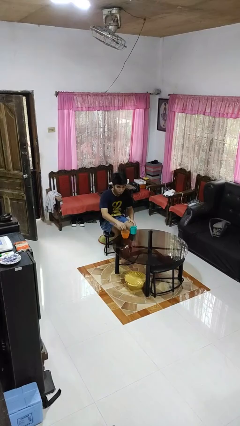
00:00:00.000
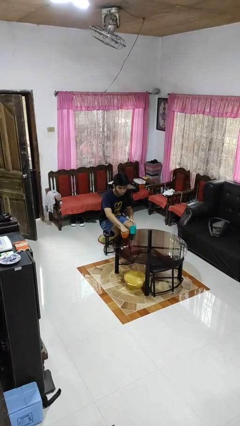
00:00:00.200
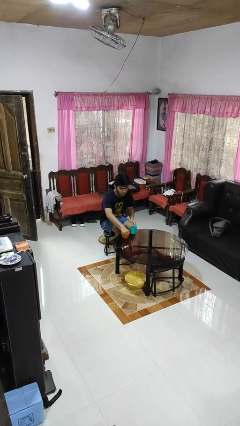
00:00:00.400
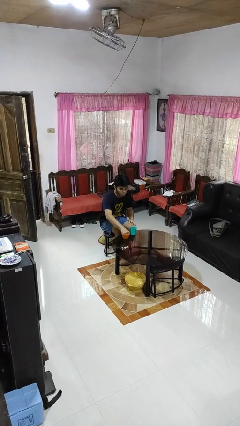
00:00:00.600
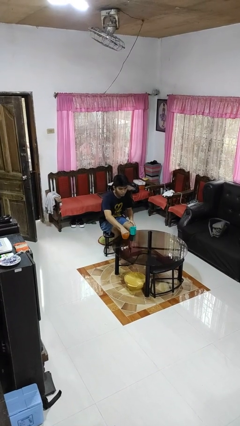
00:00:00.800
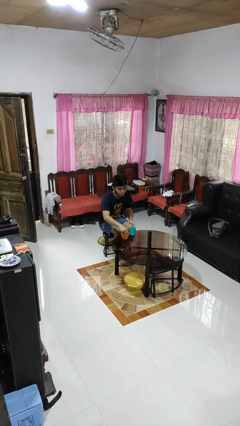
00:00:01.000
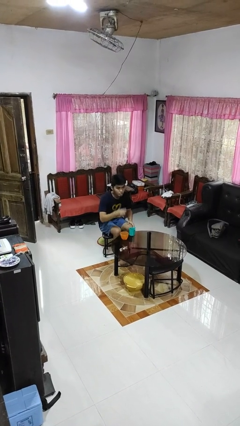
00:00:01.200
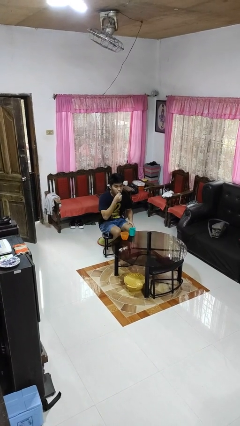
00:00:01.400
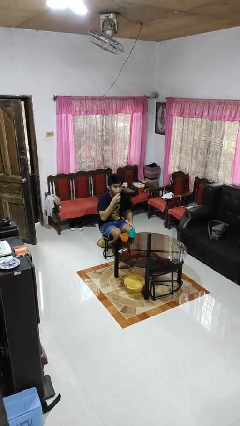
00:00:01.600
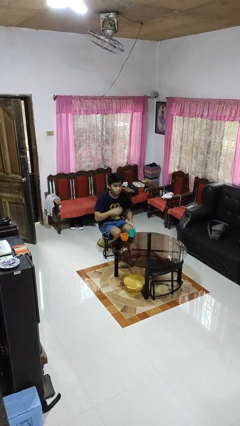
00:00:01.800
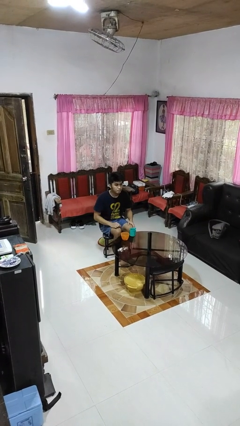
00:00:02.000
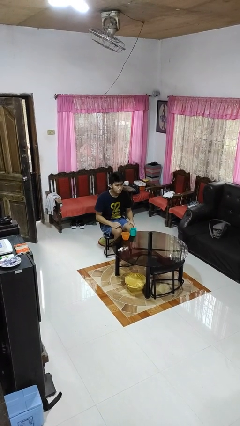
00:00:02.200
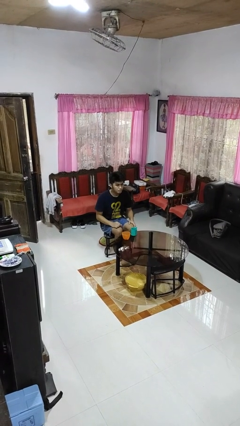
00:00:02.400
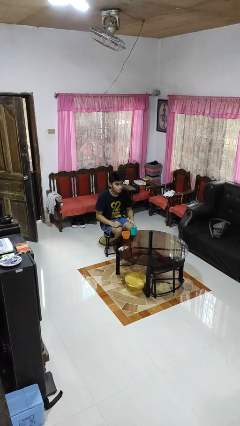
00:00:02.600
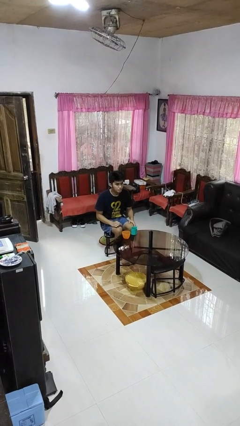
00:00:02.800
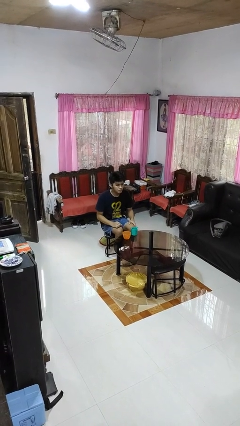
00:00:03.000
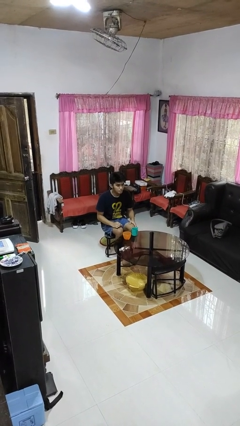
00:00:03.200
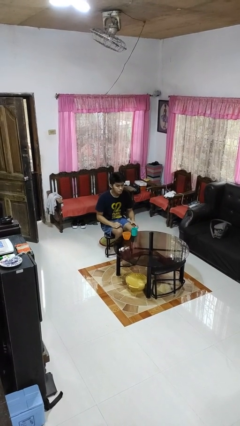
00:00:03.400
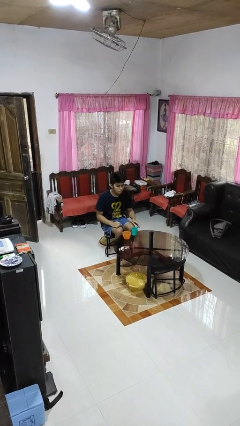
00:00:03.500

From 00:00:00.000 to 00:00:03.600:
person takes medicine pills

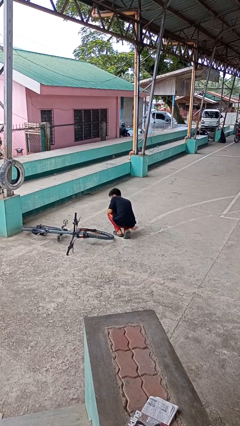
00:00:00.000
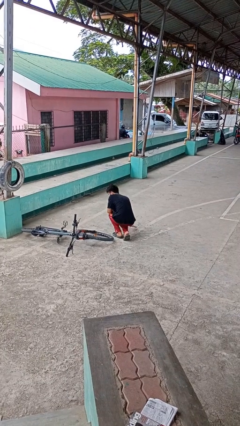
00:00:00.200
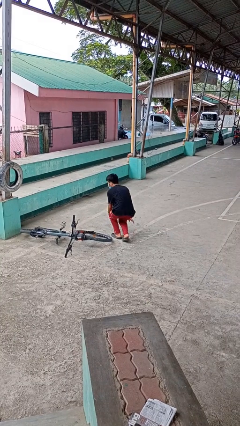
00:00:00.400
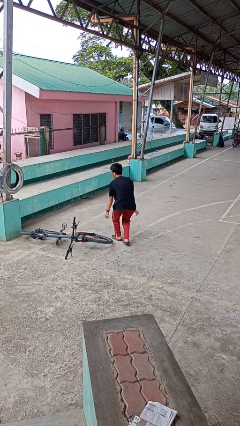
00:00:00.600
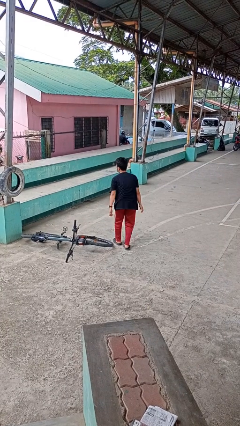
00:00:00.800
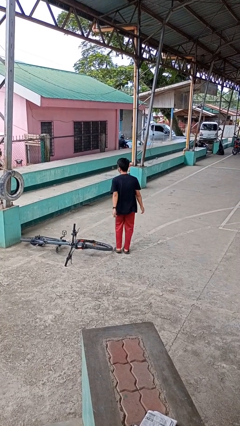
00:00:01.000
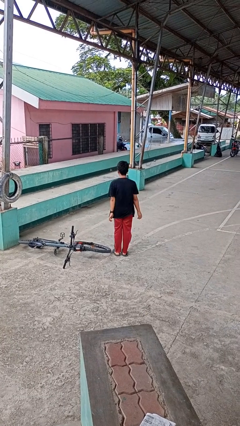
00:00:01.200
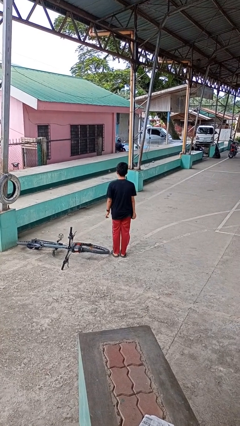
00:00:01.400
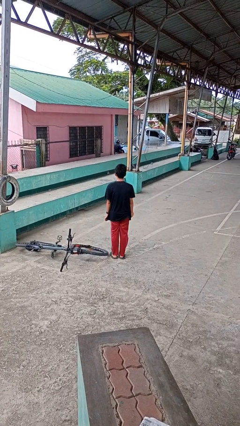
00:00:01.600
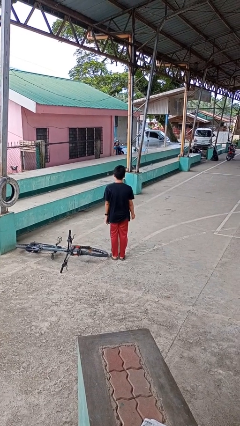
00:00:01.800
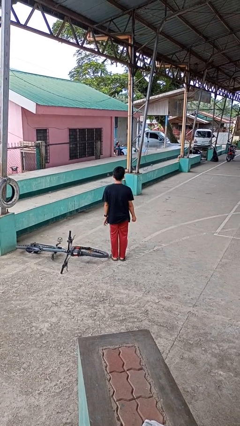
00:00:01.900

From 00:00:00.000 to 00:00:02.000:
person stands up from floor

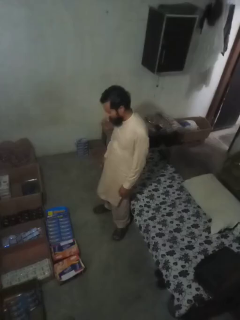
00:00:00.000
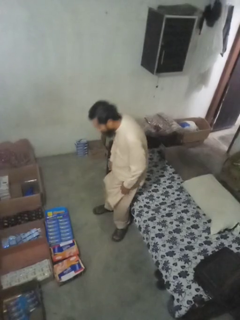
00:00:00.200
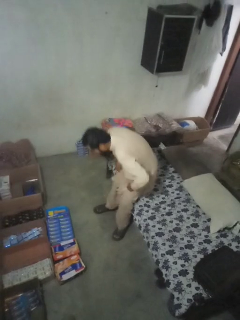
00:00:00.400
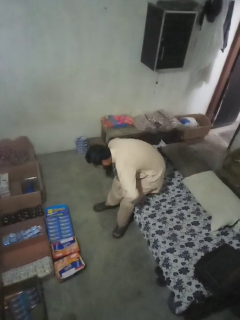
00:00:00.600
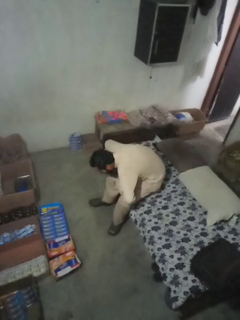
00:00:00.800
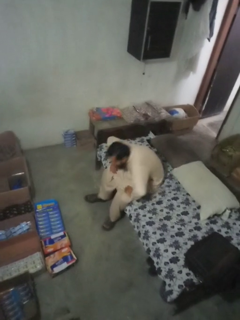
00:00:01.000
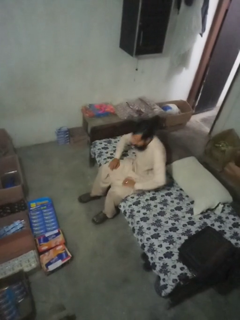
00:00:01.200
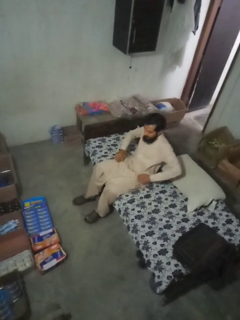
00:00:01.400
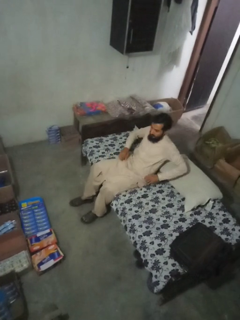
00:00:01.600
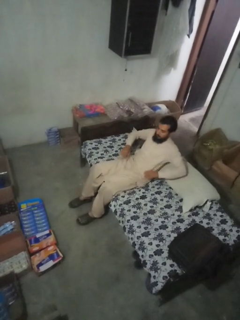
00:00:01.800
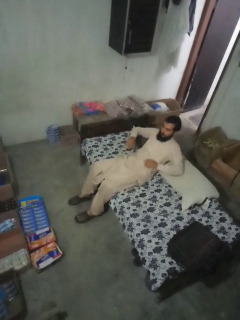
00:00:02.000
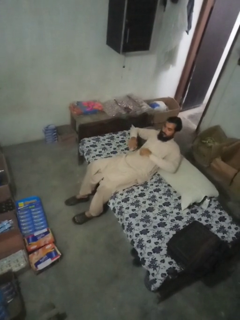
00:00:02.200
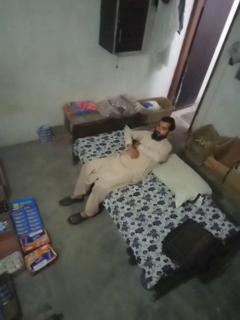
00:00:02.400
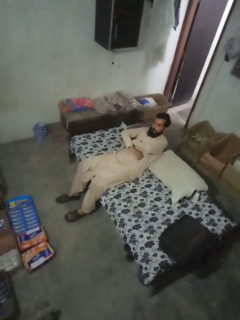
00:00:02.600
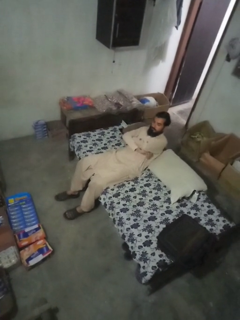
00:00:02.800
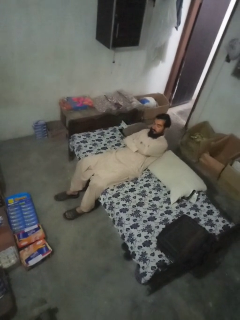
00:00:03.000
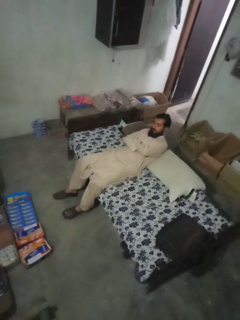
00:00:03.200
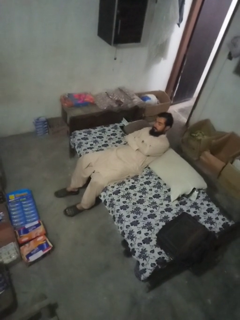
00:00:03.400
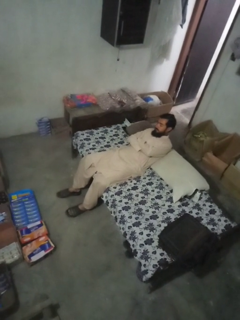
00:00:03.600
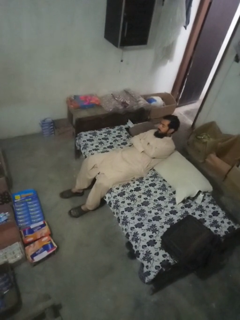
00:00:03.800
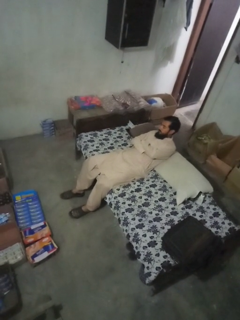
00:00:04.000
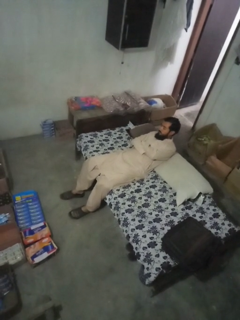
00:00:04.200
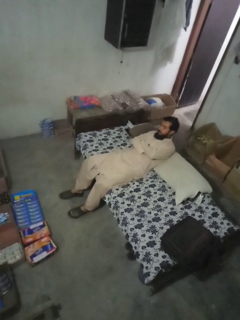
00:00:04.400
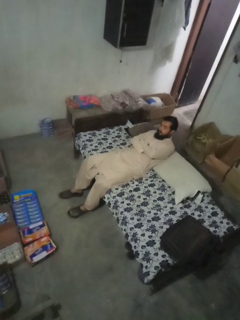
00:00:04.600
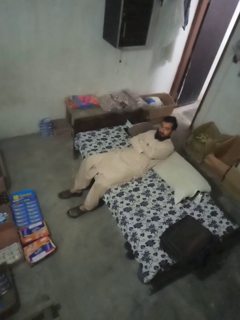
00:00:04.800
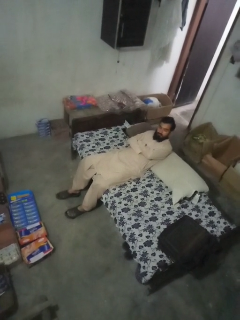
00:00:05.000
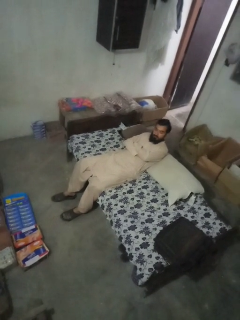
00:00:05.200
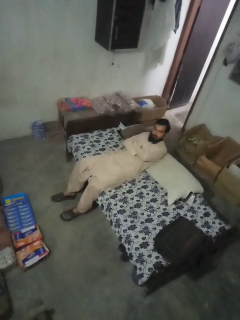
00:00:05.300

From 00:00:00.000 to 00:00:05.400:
person lies down on couch

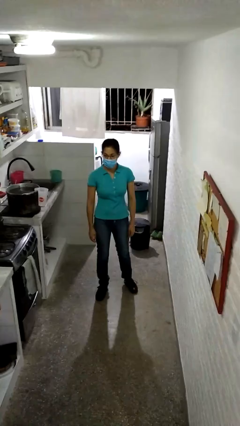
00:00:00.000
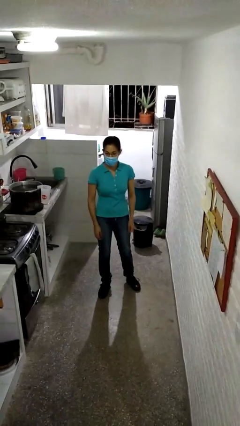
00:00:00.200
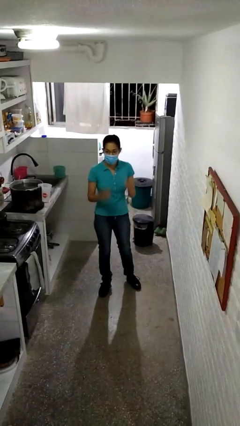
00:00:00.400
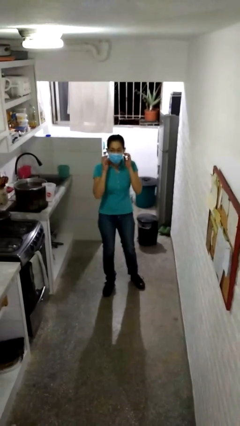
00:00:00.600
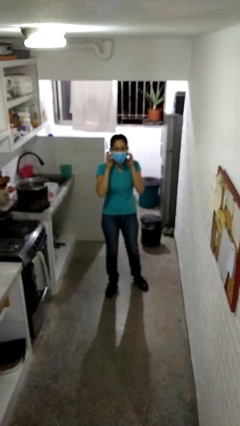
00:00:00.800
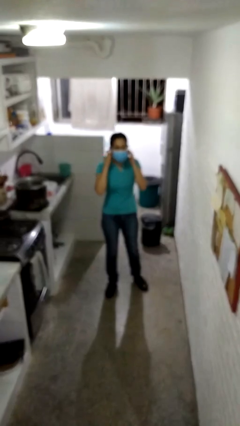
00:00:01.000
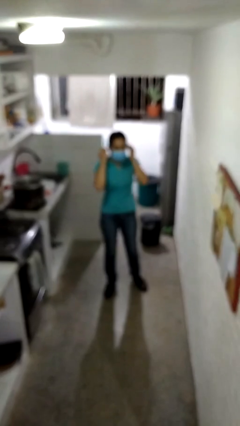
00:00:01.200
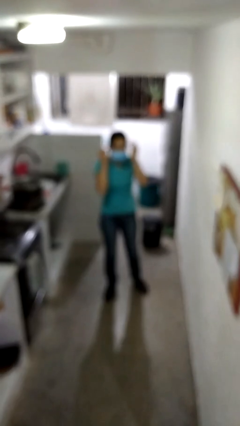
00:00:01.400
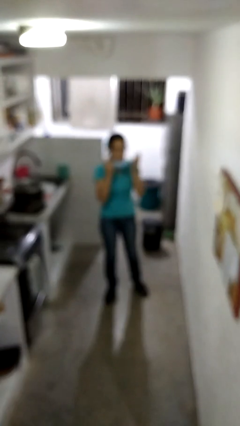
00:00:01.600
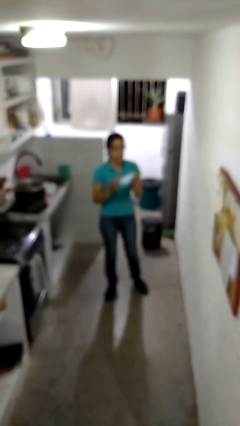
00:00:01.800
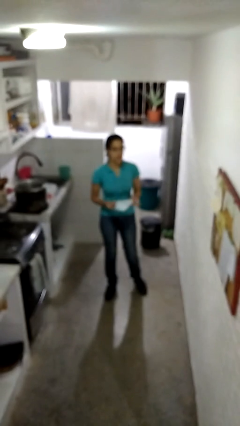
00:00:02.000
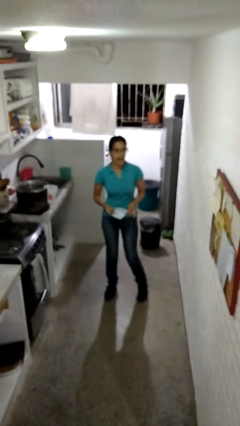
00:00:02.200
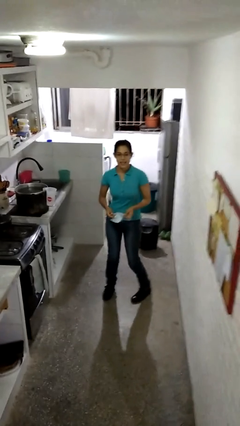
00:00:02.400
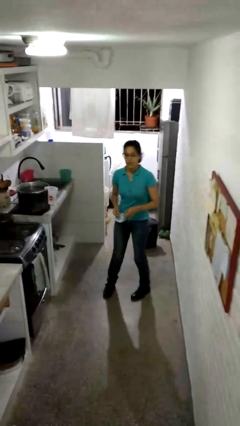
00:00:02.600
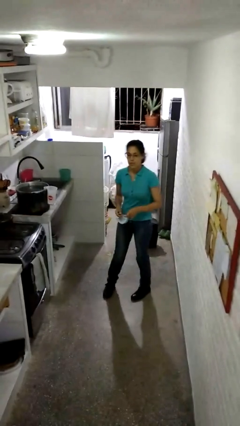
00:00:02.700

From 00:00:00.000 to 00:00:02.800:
person takes off facemask

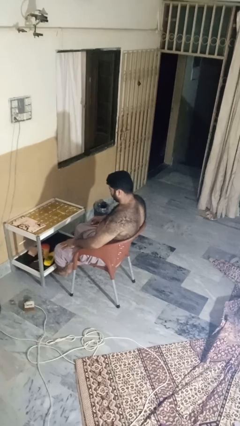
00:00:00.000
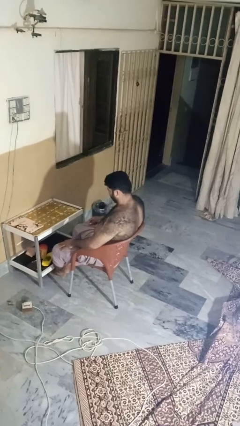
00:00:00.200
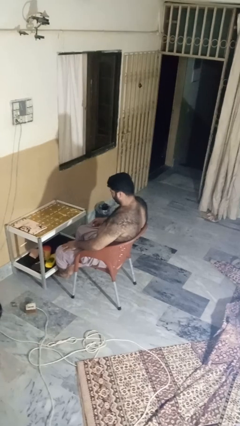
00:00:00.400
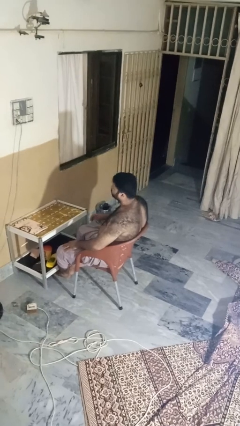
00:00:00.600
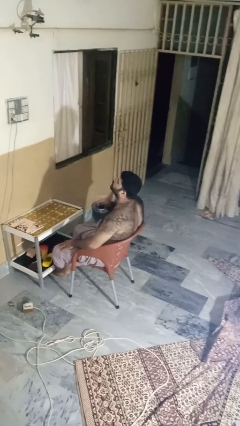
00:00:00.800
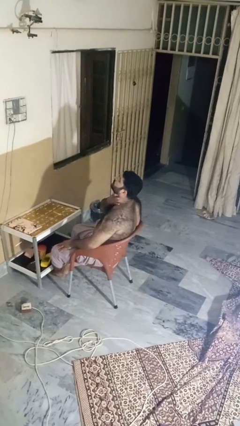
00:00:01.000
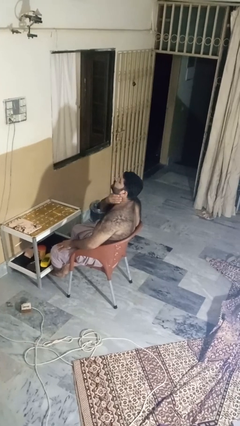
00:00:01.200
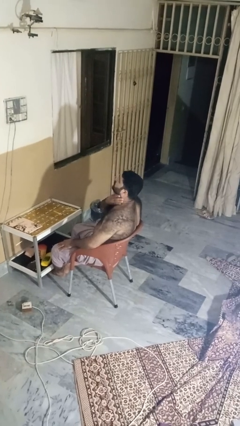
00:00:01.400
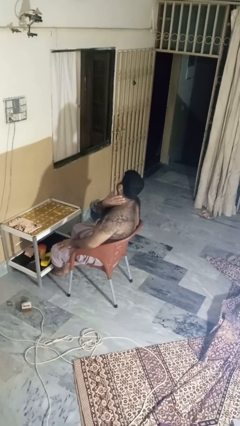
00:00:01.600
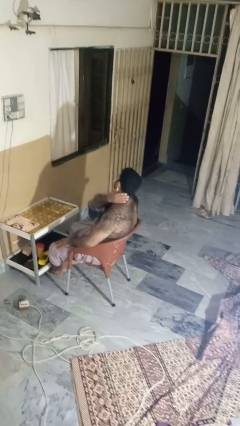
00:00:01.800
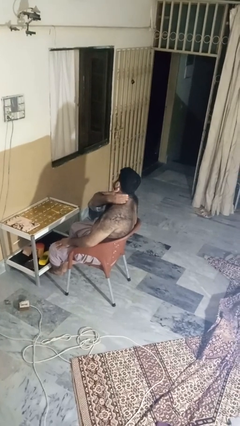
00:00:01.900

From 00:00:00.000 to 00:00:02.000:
person rubs neck

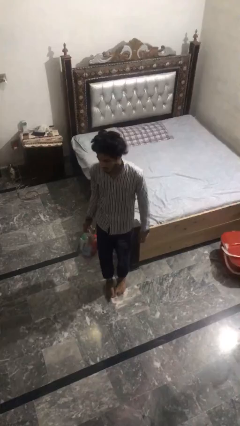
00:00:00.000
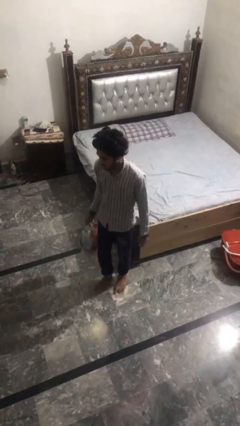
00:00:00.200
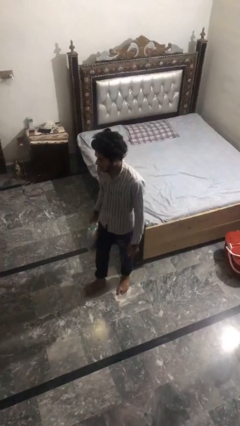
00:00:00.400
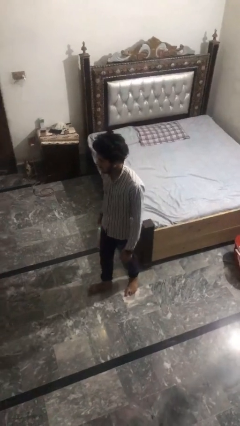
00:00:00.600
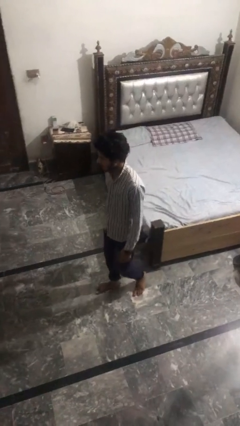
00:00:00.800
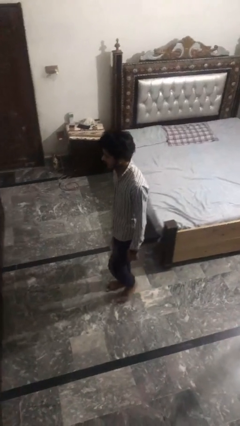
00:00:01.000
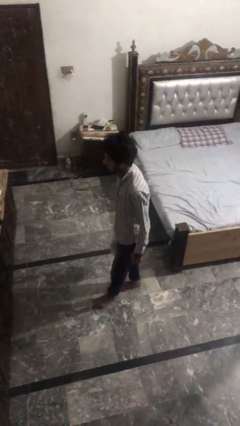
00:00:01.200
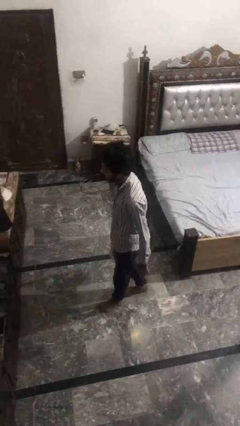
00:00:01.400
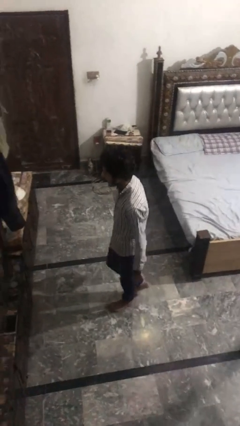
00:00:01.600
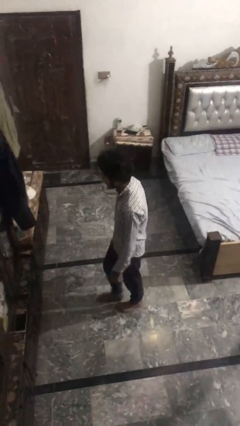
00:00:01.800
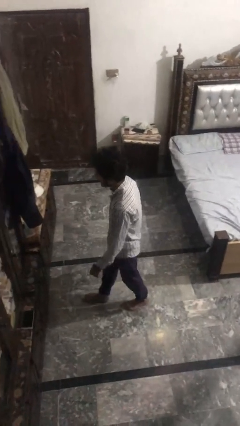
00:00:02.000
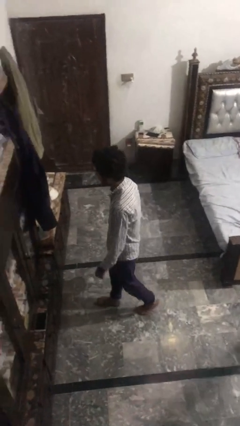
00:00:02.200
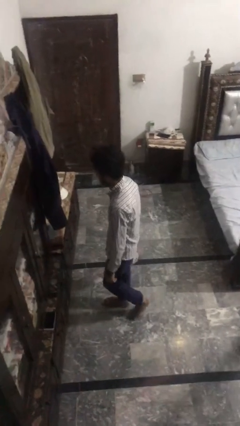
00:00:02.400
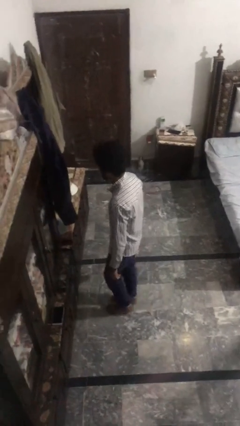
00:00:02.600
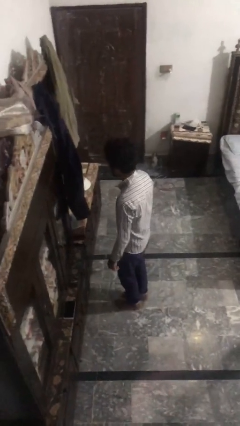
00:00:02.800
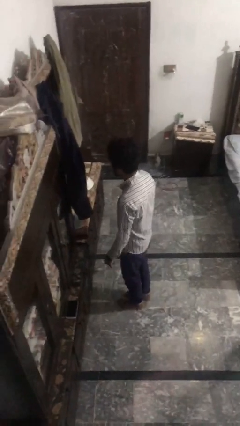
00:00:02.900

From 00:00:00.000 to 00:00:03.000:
person carries groceries
